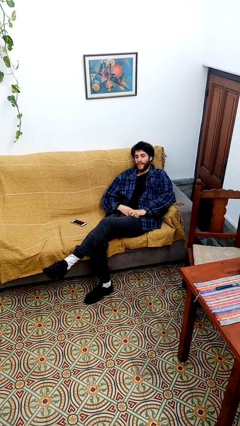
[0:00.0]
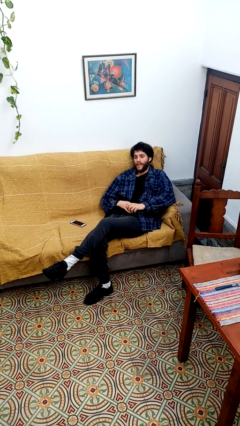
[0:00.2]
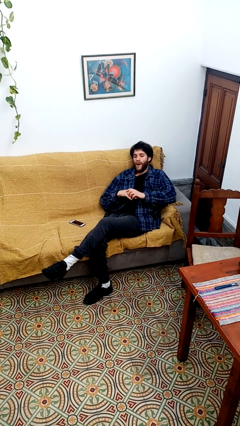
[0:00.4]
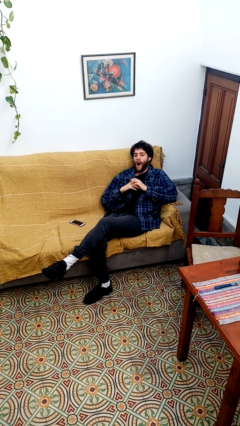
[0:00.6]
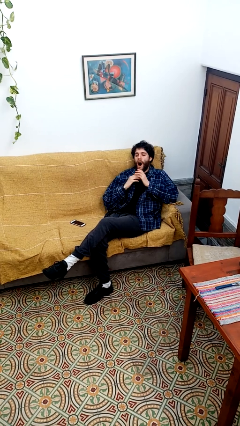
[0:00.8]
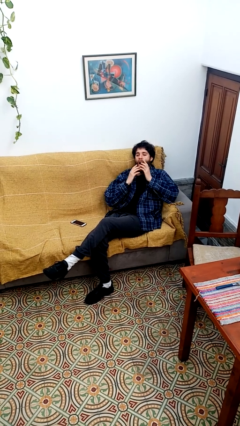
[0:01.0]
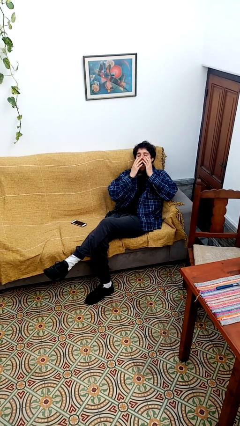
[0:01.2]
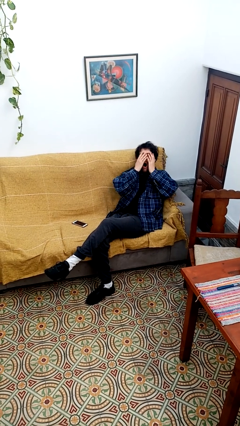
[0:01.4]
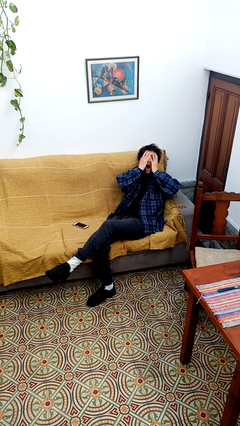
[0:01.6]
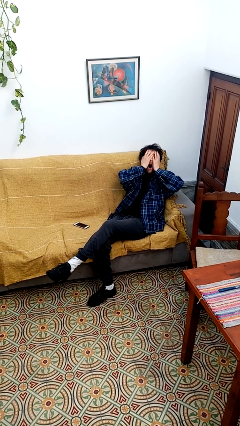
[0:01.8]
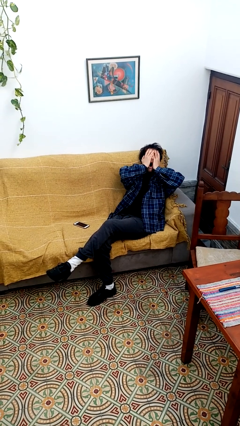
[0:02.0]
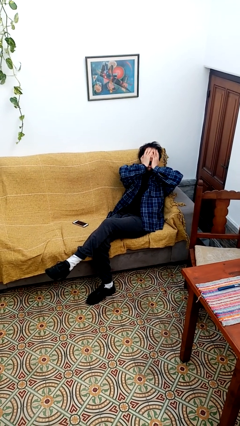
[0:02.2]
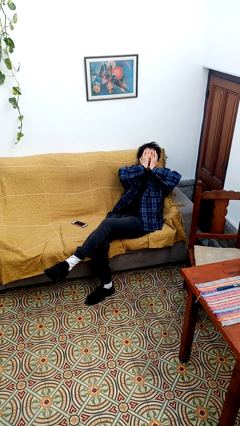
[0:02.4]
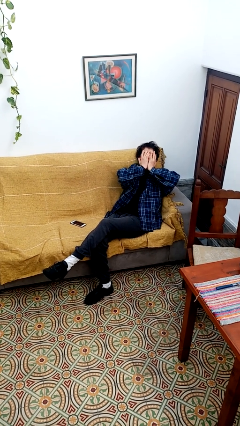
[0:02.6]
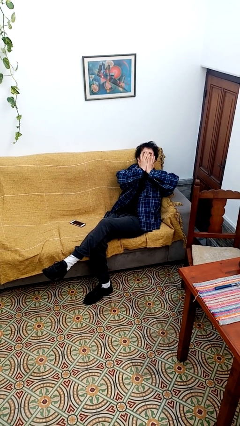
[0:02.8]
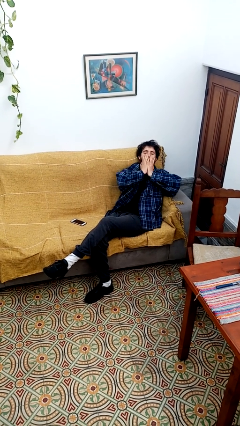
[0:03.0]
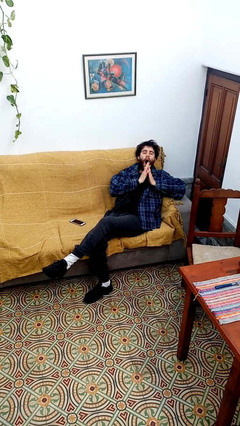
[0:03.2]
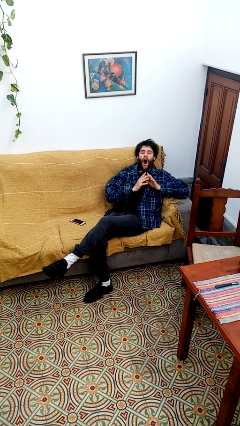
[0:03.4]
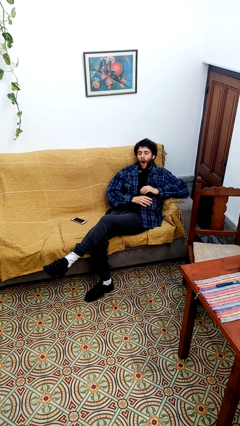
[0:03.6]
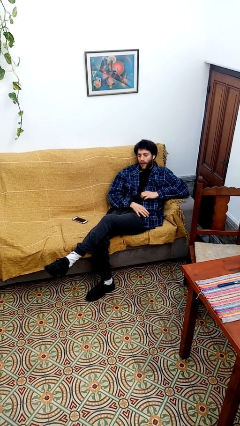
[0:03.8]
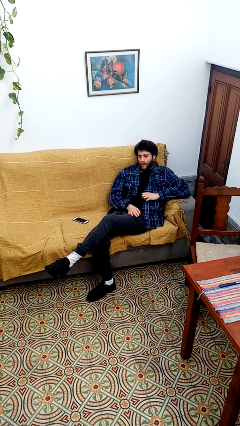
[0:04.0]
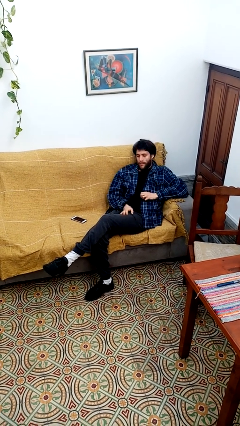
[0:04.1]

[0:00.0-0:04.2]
person yawns

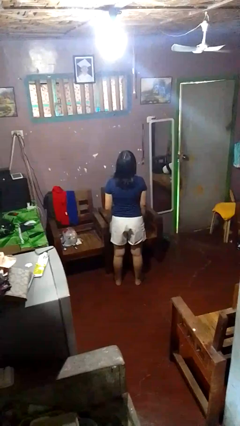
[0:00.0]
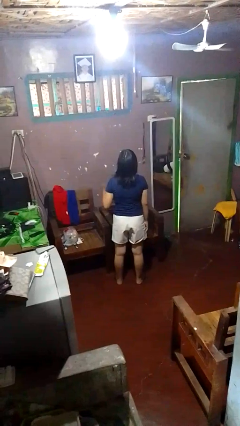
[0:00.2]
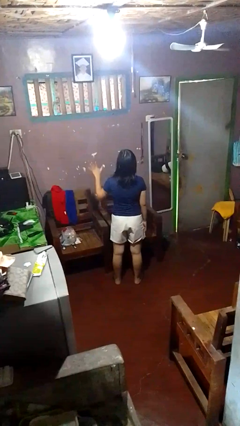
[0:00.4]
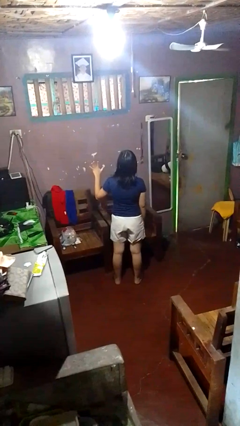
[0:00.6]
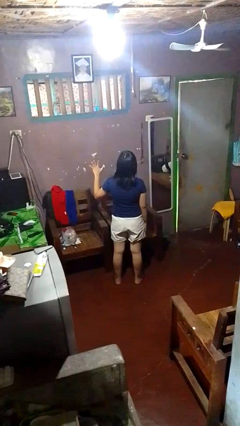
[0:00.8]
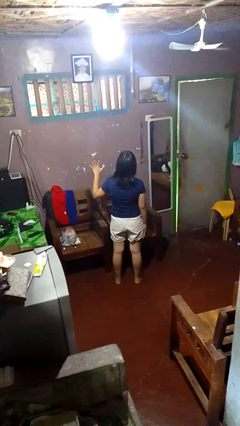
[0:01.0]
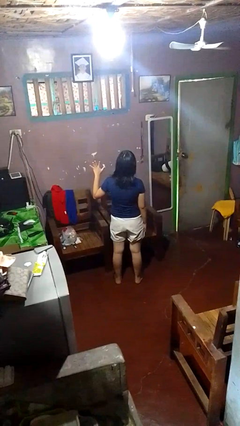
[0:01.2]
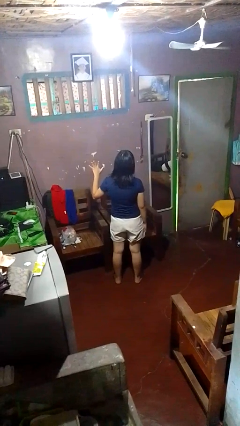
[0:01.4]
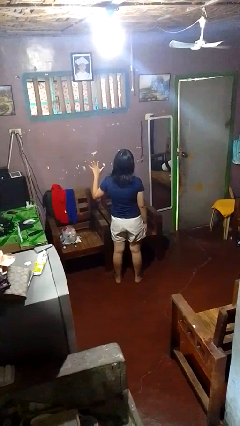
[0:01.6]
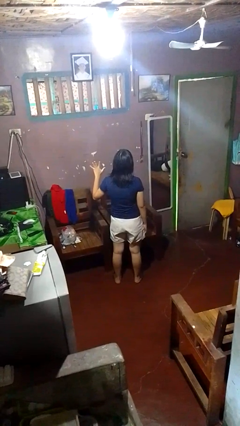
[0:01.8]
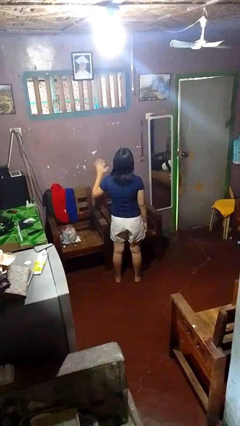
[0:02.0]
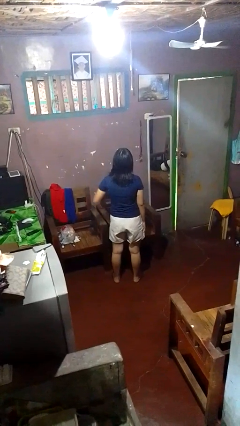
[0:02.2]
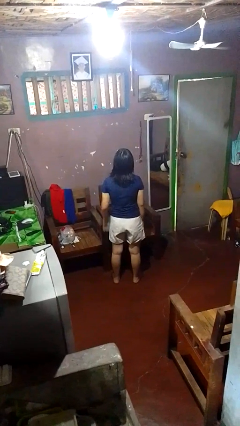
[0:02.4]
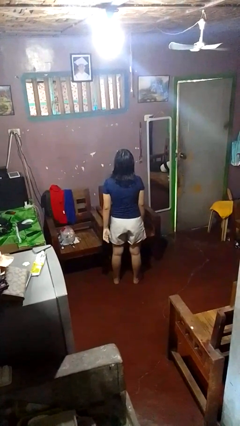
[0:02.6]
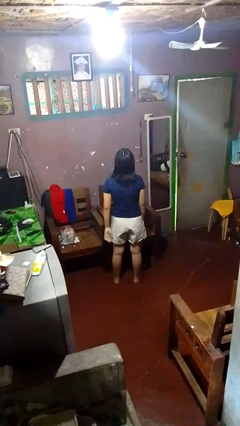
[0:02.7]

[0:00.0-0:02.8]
person gestures number five

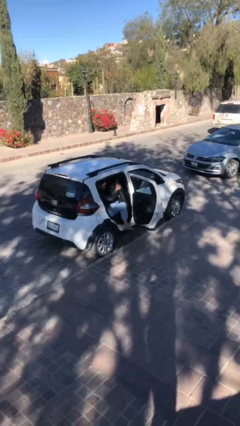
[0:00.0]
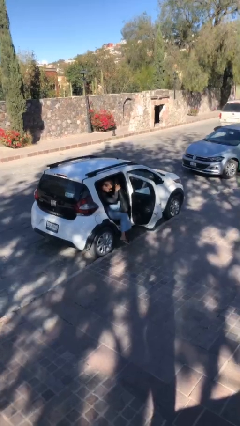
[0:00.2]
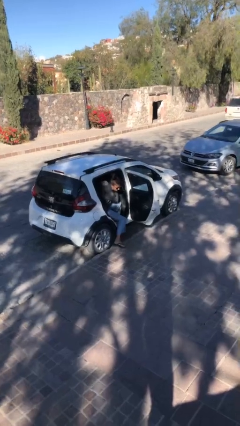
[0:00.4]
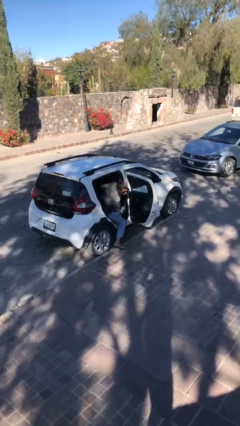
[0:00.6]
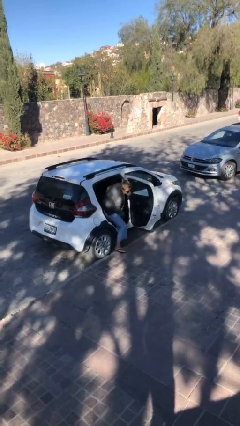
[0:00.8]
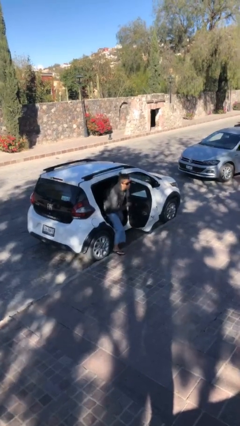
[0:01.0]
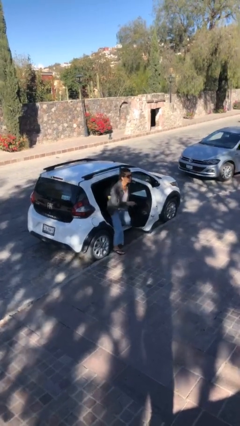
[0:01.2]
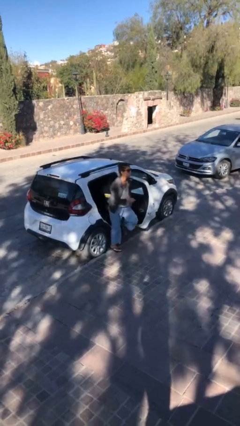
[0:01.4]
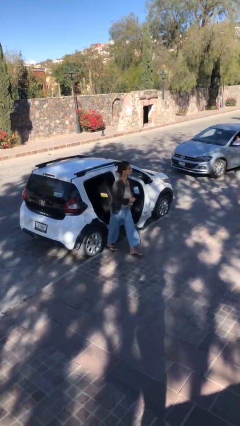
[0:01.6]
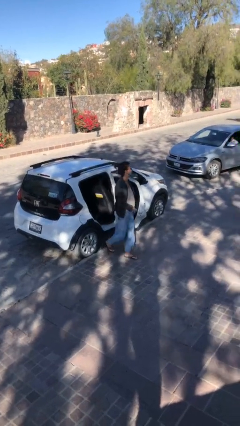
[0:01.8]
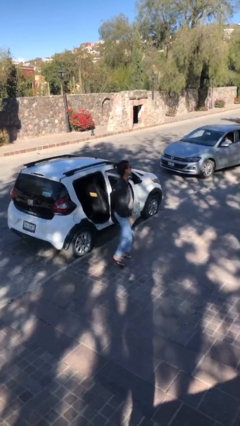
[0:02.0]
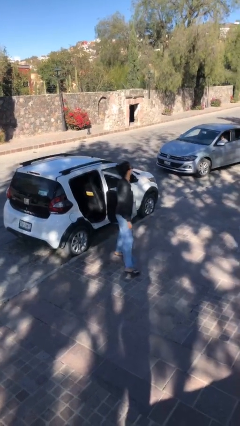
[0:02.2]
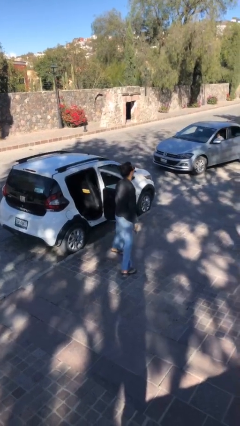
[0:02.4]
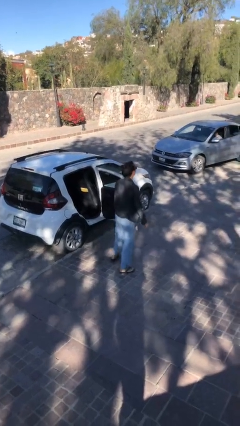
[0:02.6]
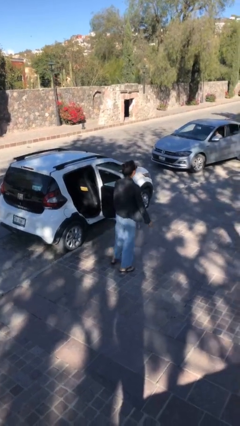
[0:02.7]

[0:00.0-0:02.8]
person exits car

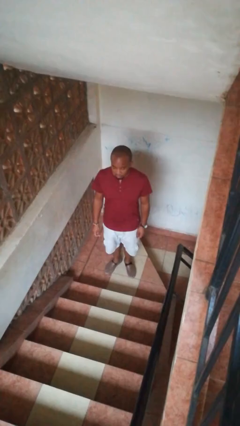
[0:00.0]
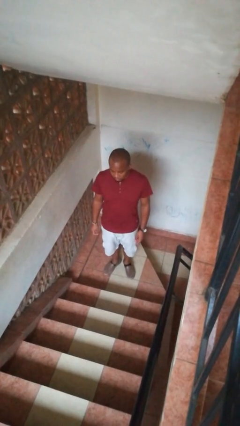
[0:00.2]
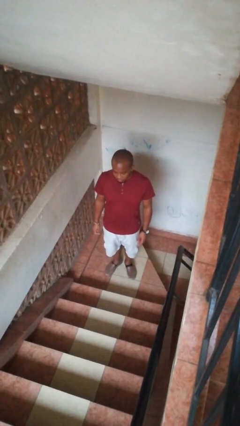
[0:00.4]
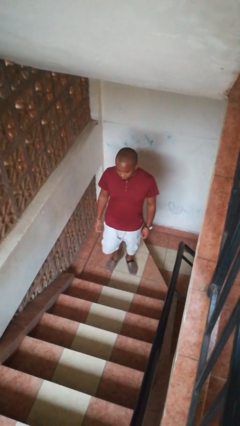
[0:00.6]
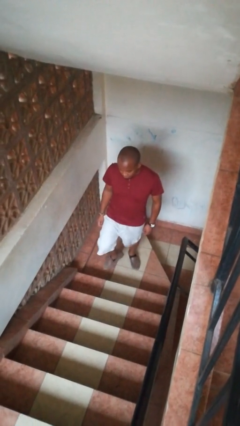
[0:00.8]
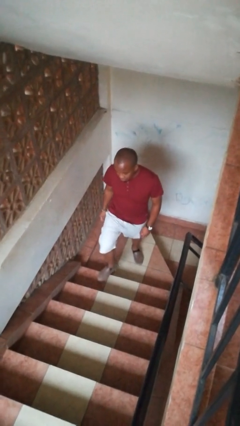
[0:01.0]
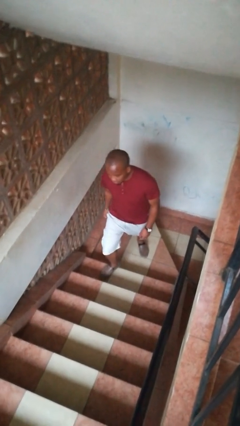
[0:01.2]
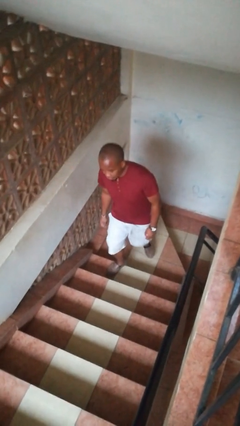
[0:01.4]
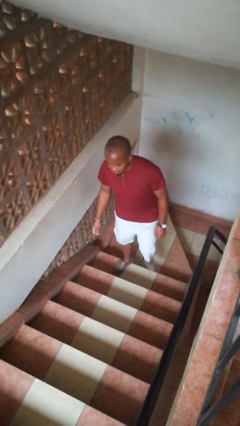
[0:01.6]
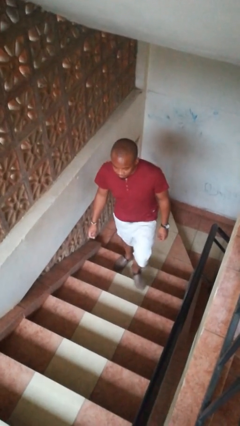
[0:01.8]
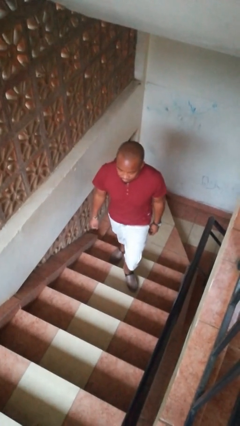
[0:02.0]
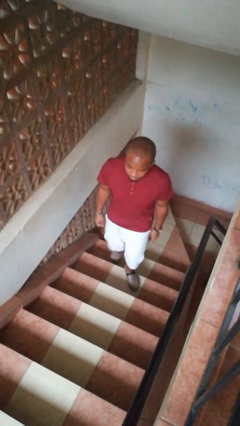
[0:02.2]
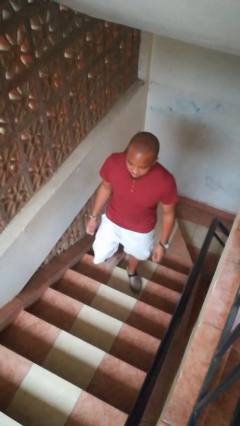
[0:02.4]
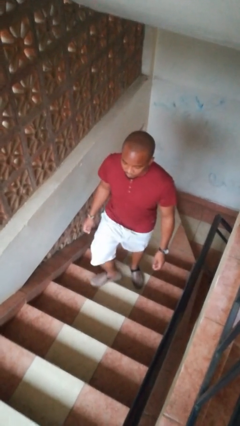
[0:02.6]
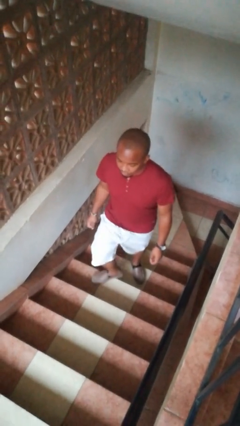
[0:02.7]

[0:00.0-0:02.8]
person climbs up stairs

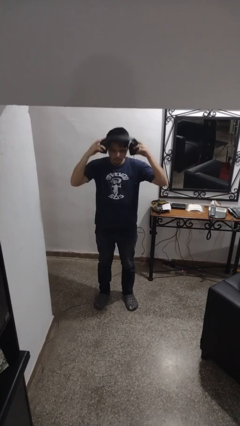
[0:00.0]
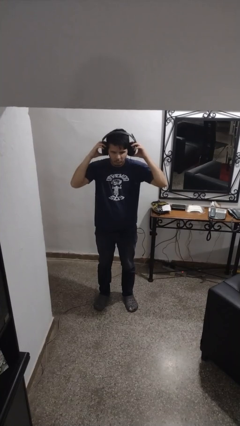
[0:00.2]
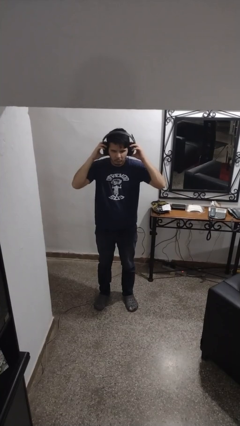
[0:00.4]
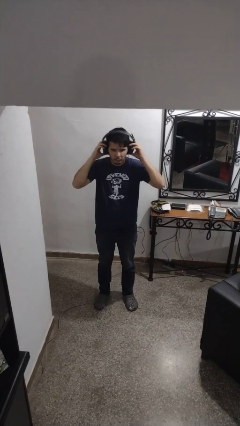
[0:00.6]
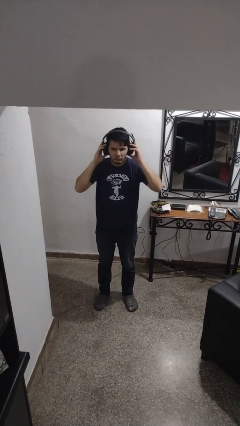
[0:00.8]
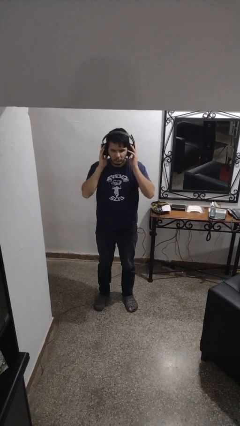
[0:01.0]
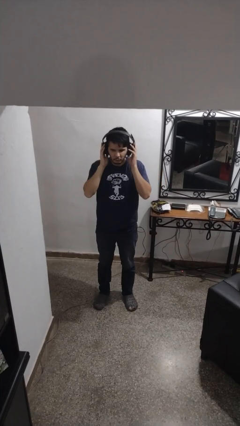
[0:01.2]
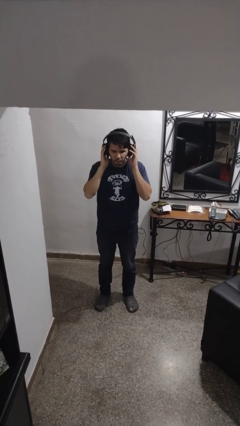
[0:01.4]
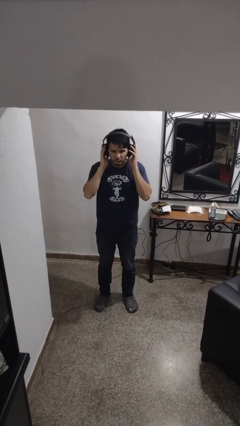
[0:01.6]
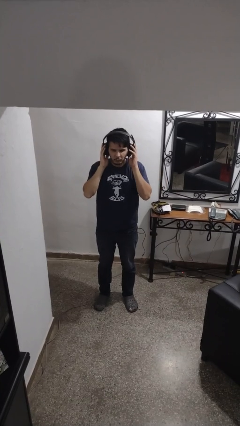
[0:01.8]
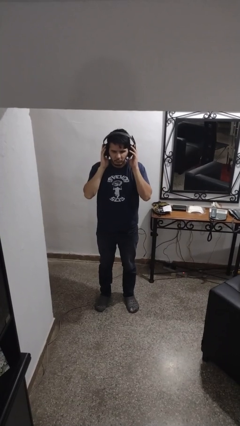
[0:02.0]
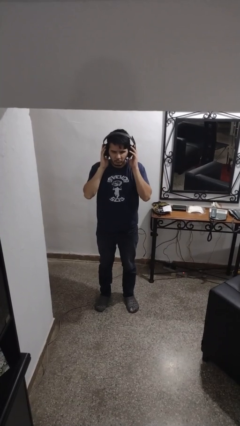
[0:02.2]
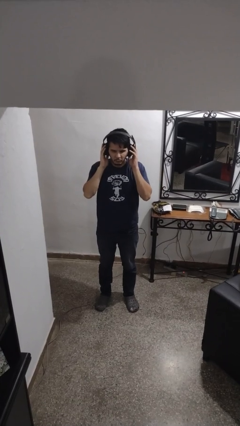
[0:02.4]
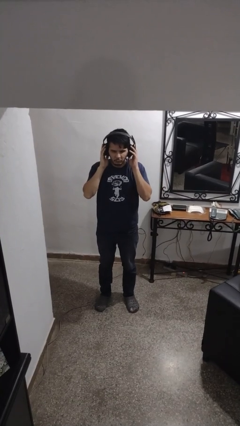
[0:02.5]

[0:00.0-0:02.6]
person puts on headphones

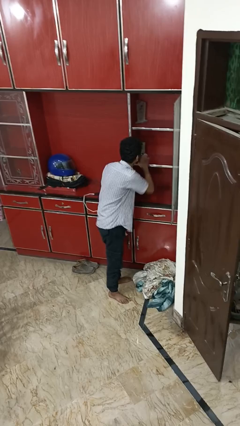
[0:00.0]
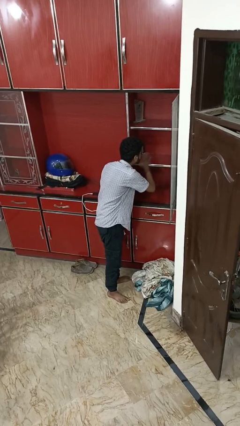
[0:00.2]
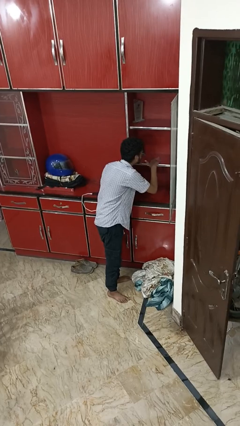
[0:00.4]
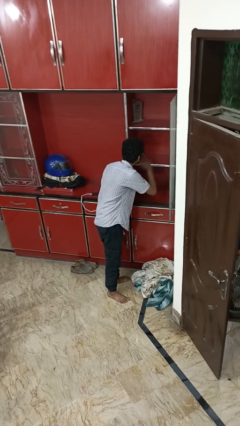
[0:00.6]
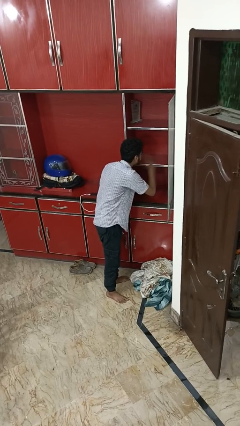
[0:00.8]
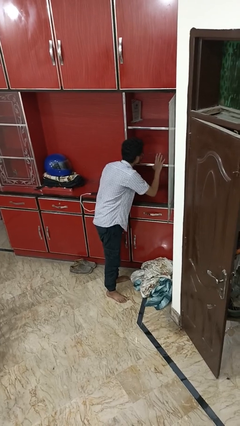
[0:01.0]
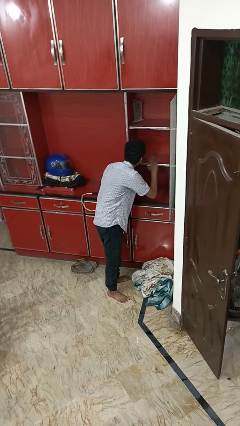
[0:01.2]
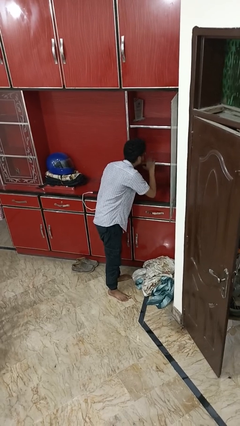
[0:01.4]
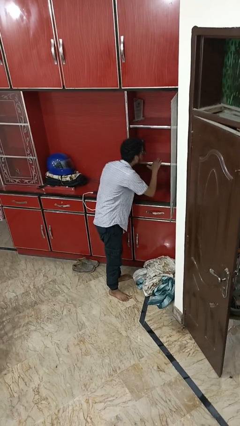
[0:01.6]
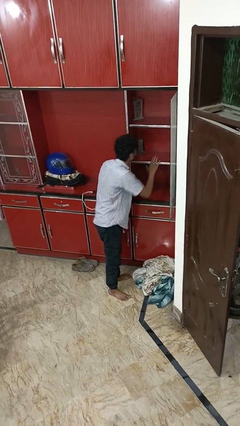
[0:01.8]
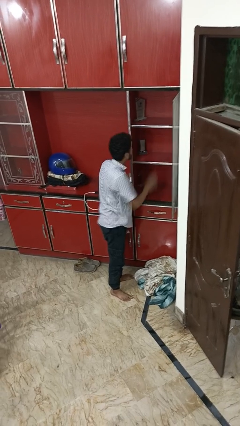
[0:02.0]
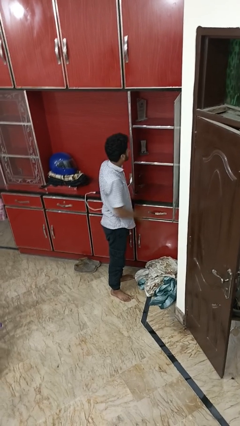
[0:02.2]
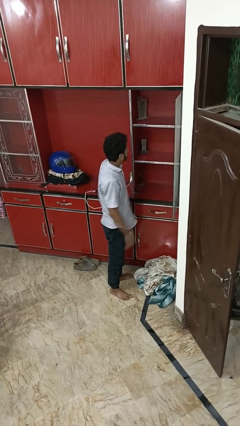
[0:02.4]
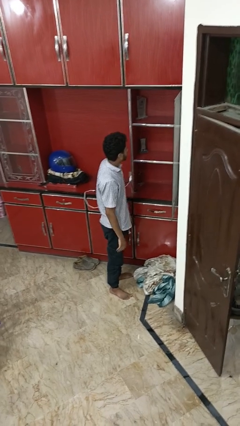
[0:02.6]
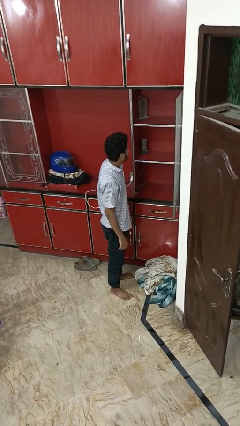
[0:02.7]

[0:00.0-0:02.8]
person searches in cabinet
